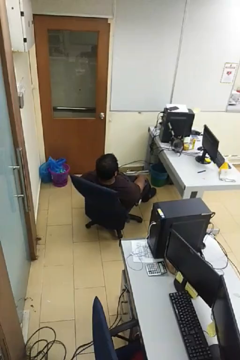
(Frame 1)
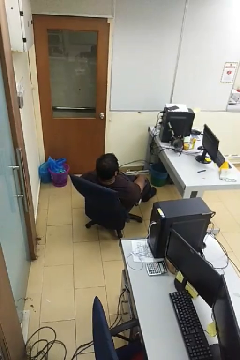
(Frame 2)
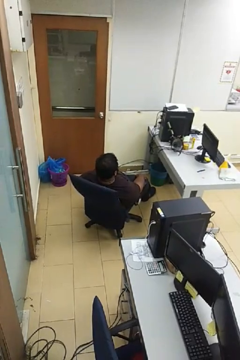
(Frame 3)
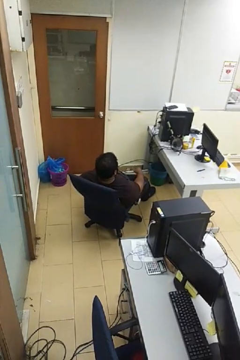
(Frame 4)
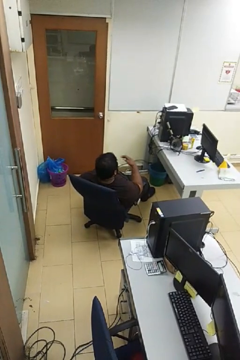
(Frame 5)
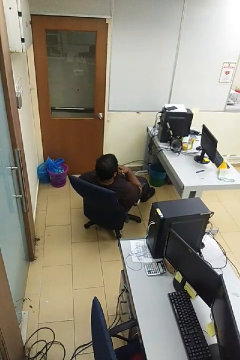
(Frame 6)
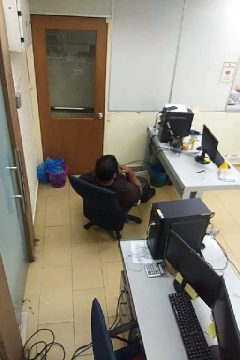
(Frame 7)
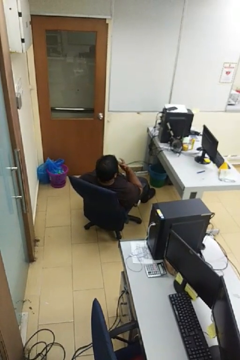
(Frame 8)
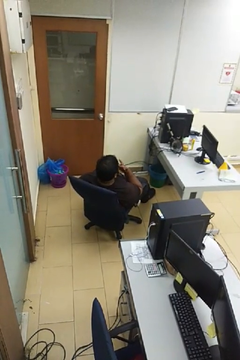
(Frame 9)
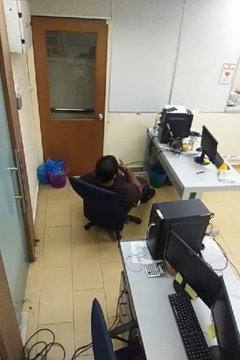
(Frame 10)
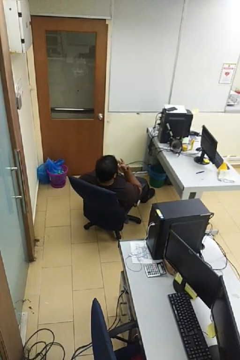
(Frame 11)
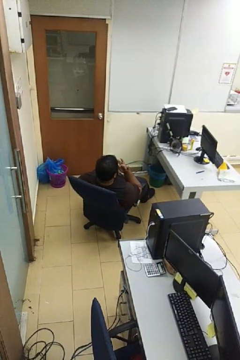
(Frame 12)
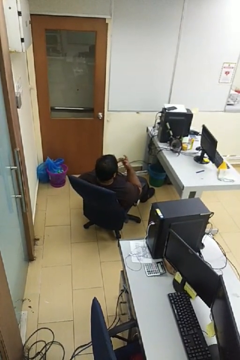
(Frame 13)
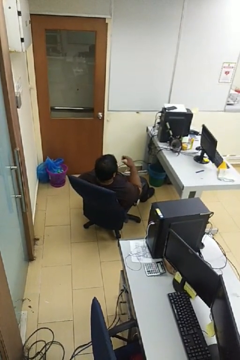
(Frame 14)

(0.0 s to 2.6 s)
person licks fingers

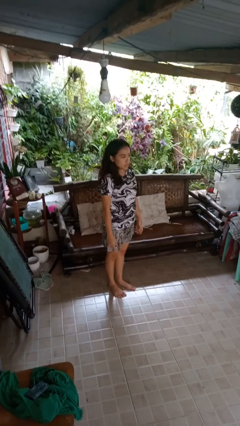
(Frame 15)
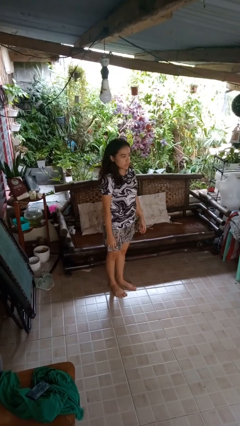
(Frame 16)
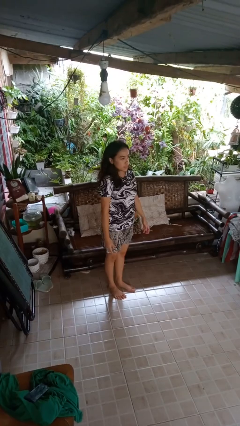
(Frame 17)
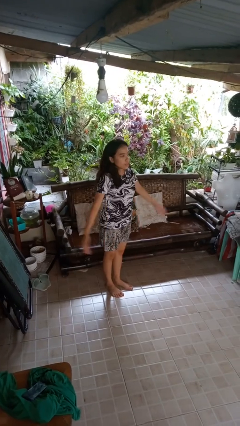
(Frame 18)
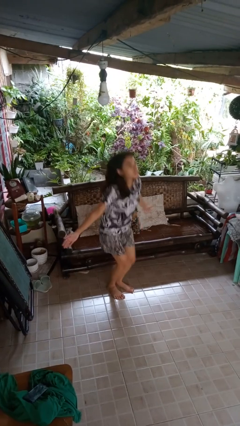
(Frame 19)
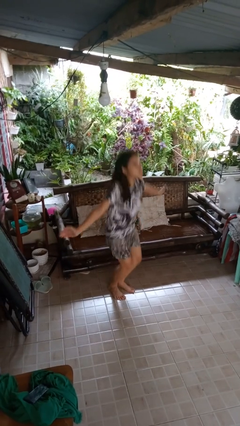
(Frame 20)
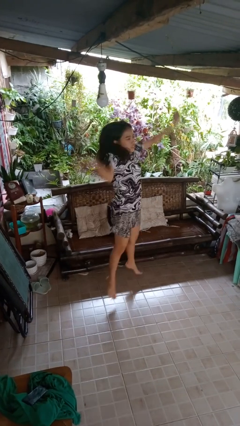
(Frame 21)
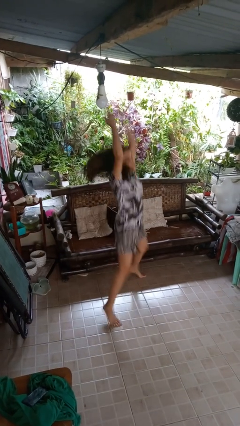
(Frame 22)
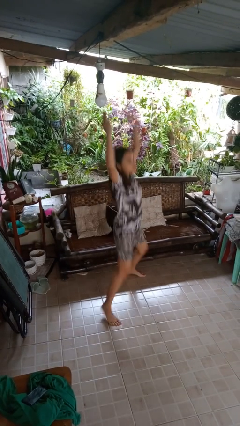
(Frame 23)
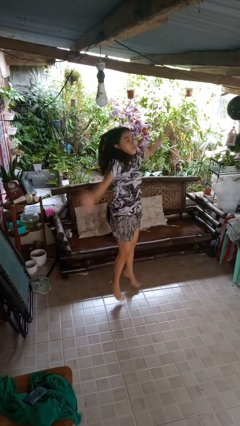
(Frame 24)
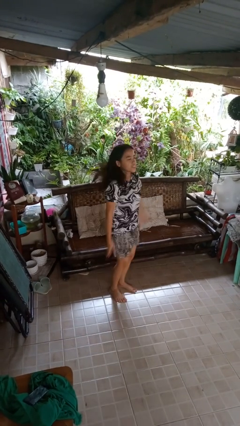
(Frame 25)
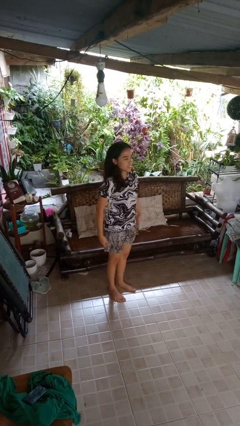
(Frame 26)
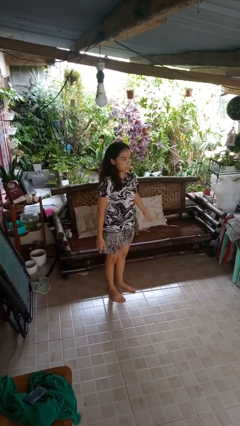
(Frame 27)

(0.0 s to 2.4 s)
person exercises with jumping jacks

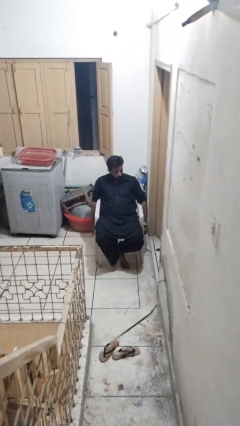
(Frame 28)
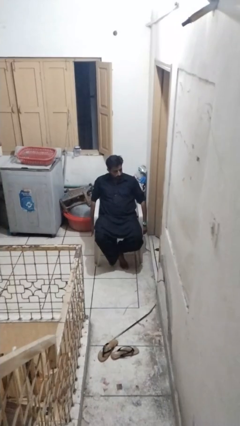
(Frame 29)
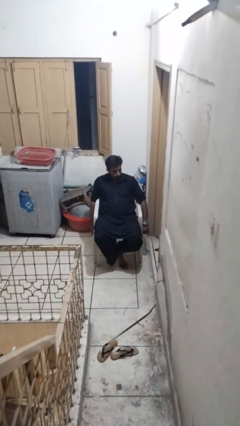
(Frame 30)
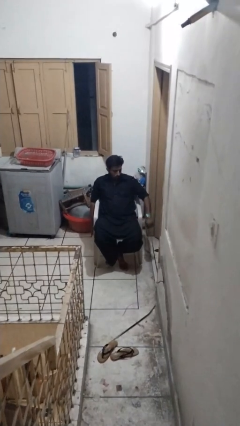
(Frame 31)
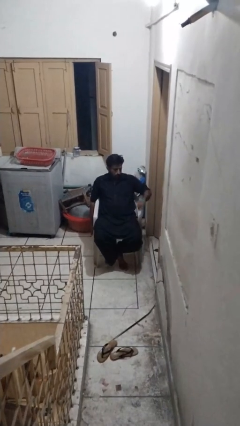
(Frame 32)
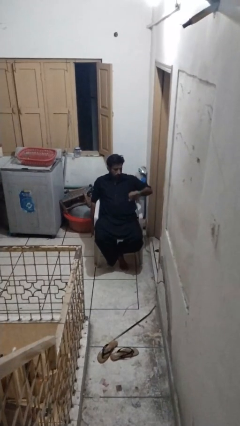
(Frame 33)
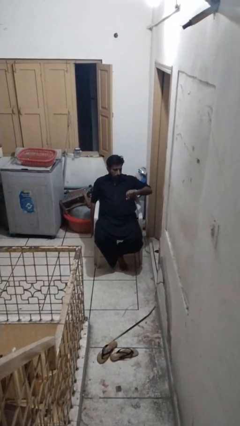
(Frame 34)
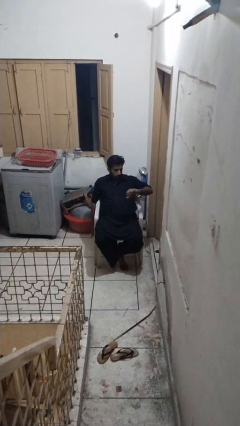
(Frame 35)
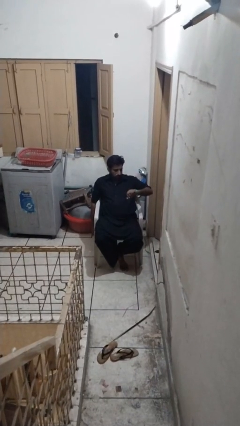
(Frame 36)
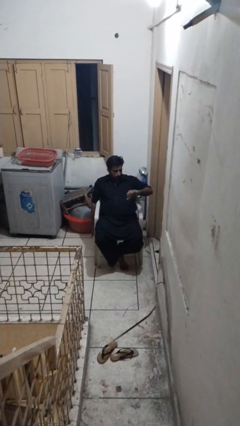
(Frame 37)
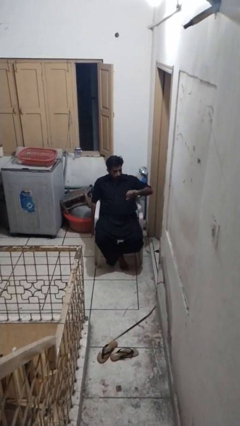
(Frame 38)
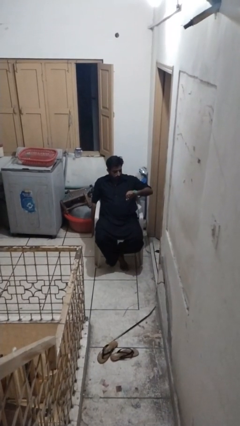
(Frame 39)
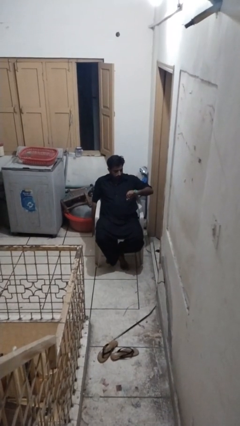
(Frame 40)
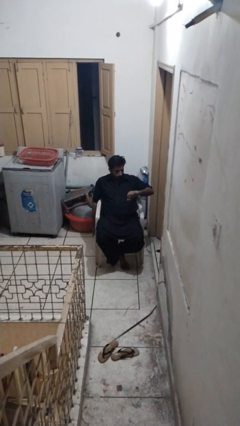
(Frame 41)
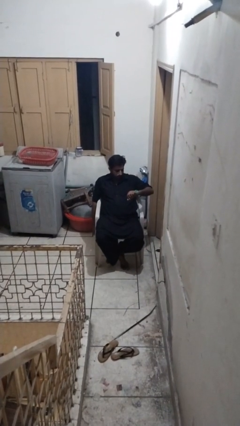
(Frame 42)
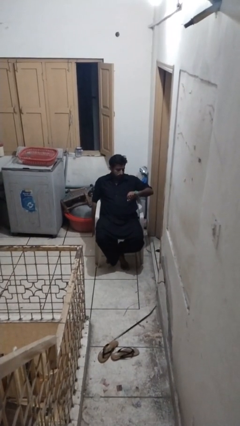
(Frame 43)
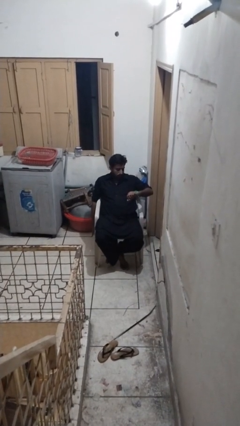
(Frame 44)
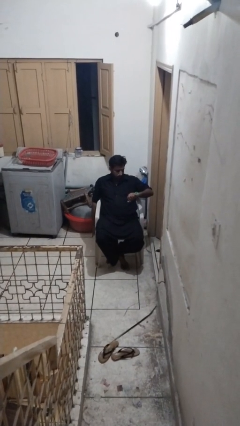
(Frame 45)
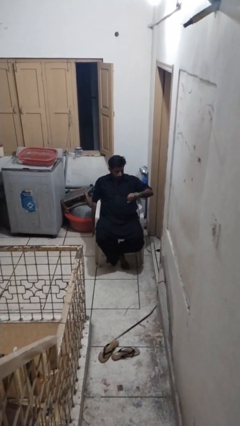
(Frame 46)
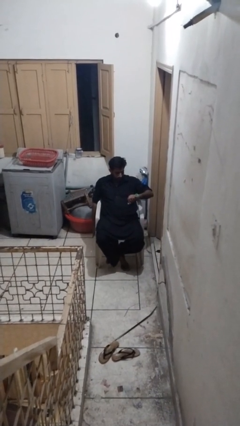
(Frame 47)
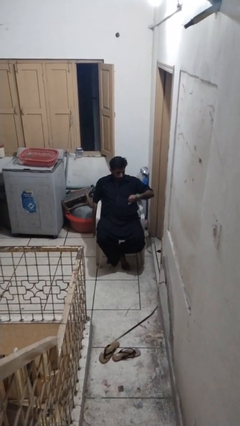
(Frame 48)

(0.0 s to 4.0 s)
person looks at wristwatch

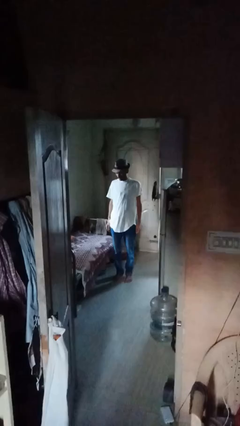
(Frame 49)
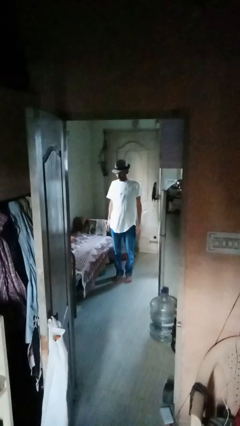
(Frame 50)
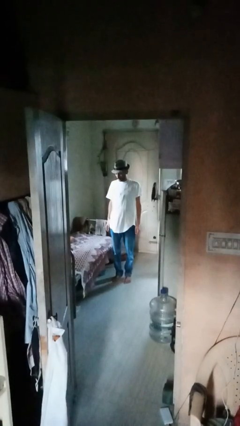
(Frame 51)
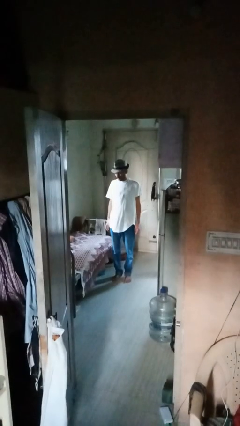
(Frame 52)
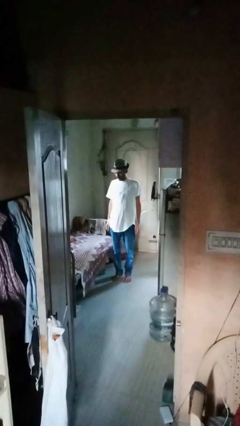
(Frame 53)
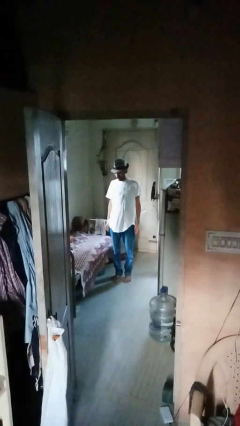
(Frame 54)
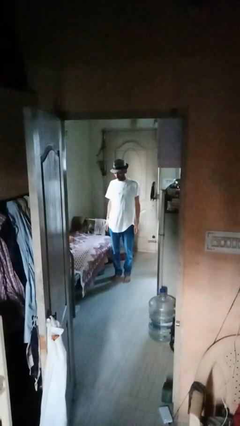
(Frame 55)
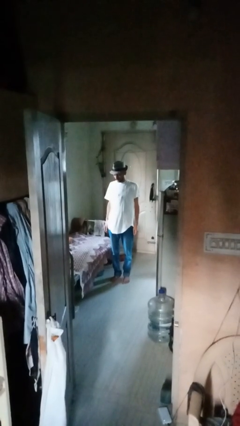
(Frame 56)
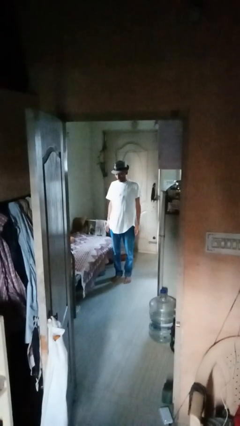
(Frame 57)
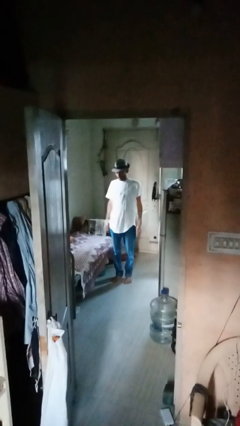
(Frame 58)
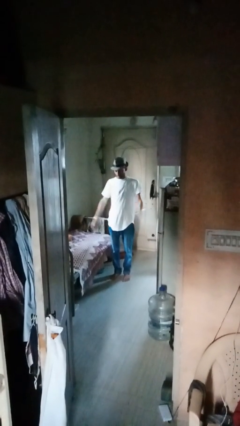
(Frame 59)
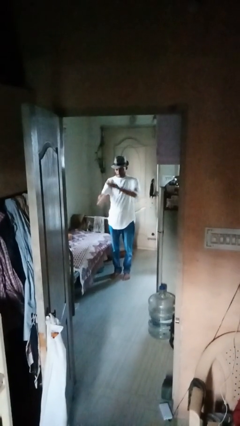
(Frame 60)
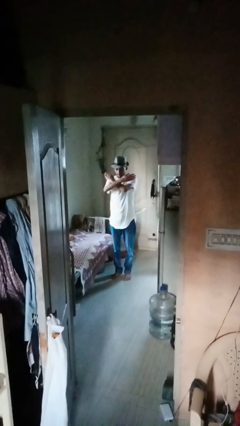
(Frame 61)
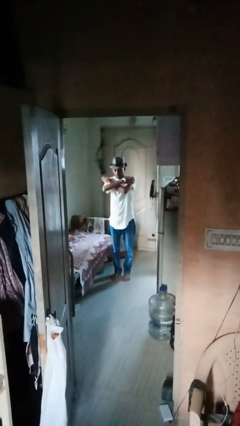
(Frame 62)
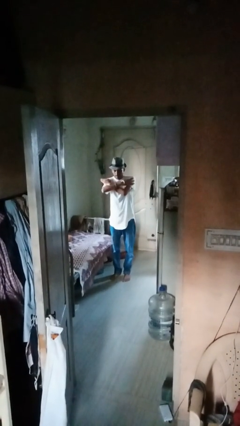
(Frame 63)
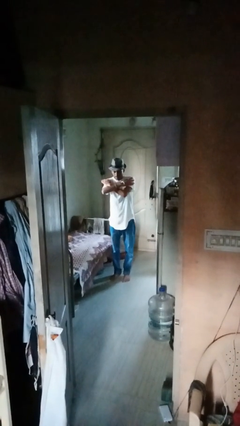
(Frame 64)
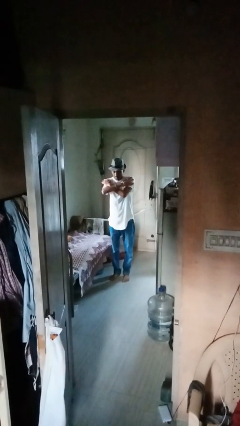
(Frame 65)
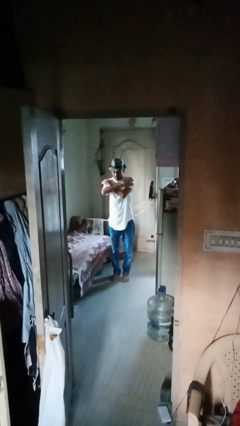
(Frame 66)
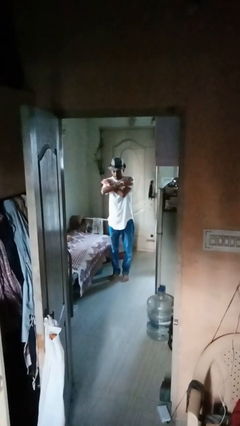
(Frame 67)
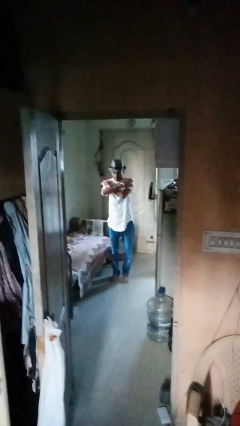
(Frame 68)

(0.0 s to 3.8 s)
person gestures arms x

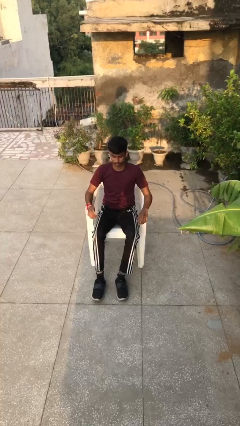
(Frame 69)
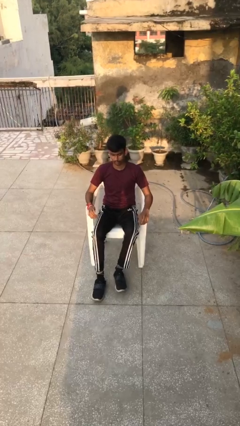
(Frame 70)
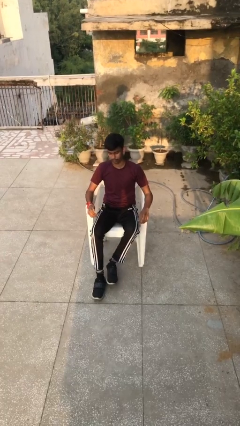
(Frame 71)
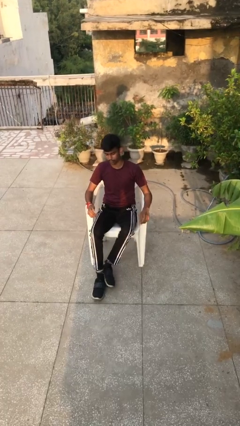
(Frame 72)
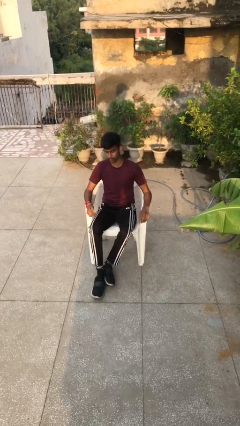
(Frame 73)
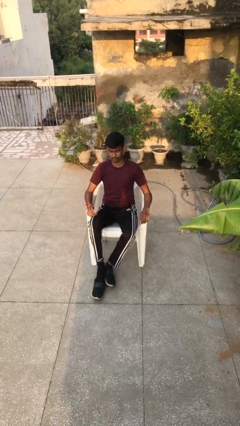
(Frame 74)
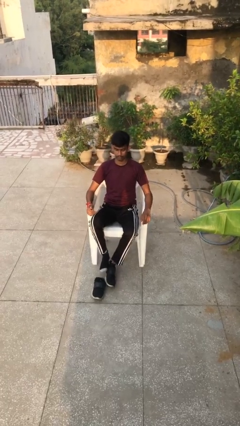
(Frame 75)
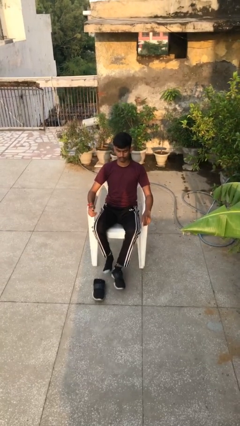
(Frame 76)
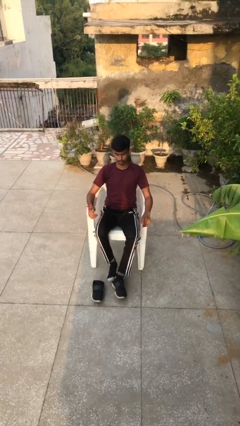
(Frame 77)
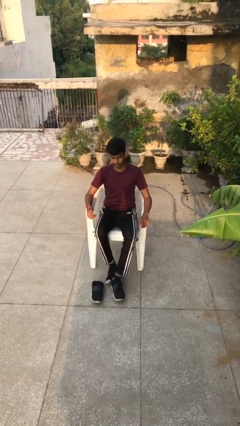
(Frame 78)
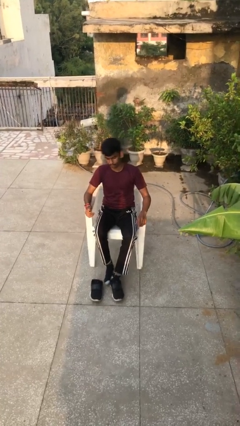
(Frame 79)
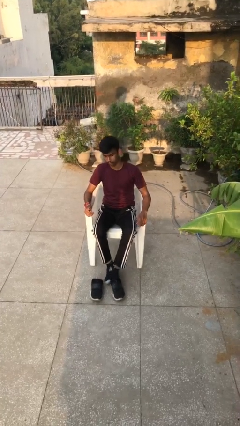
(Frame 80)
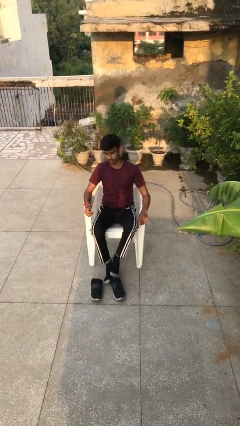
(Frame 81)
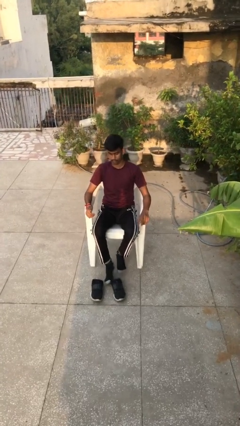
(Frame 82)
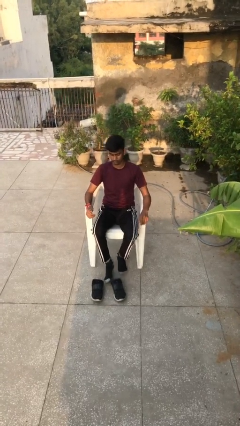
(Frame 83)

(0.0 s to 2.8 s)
person takes off shoes

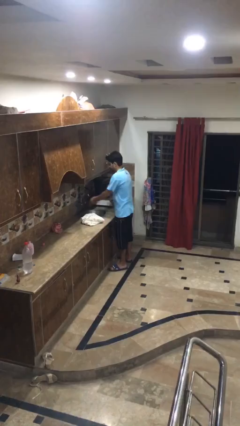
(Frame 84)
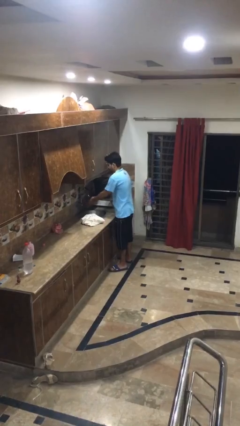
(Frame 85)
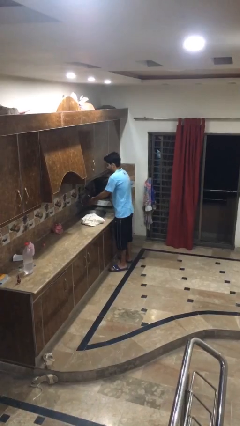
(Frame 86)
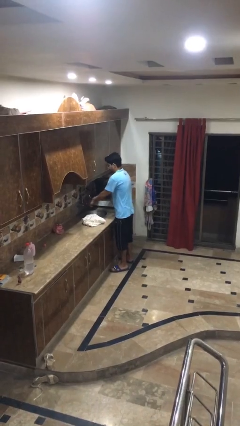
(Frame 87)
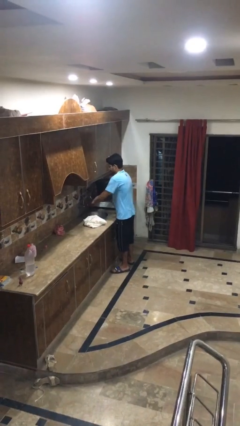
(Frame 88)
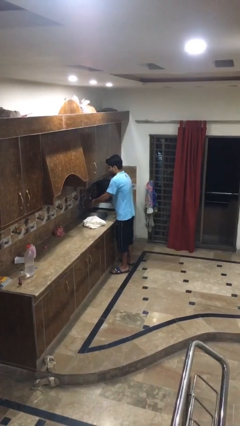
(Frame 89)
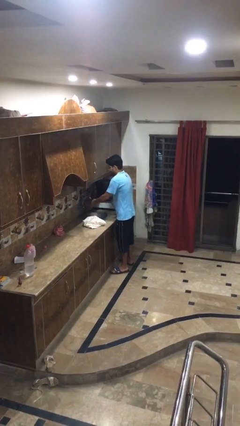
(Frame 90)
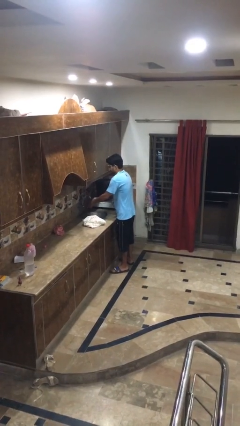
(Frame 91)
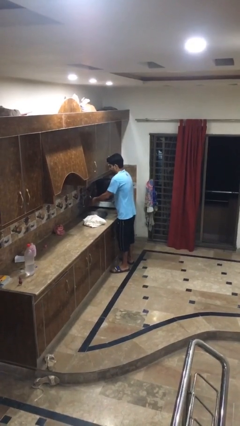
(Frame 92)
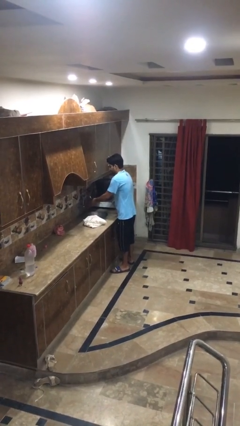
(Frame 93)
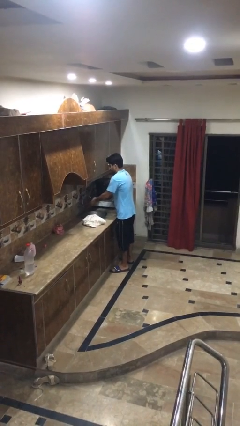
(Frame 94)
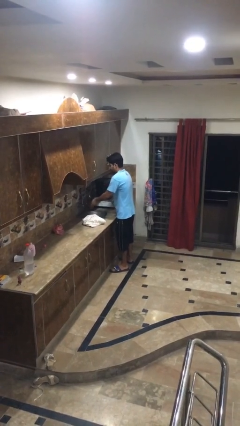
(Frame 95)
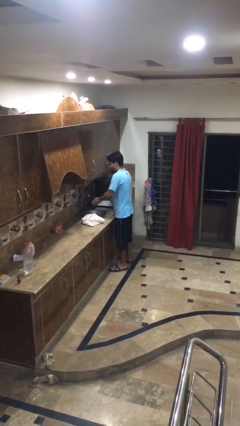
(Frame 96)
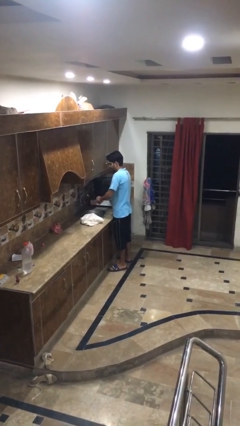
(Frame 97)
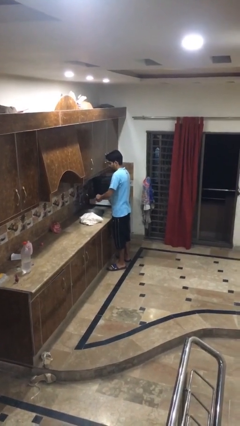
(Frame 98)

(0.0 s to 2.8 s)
person washes hands
